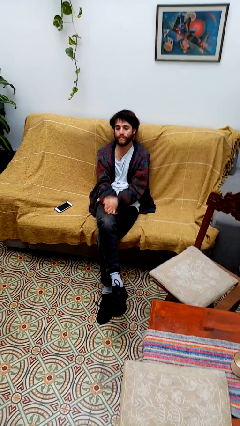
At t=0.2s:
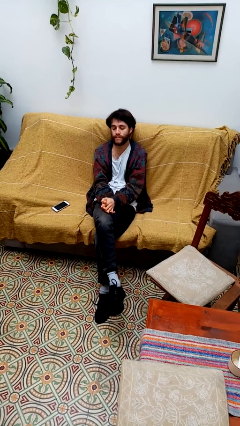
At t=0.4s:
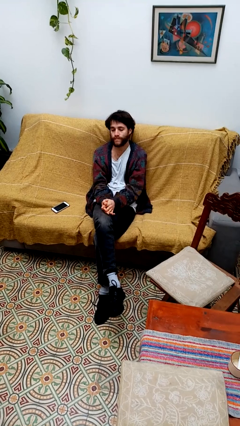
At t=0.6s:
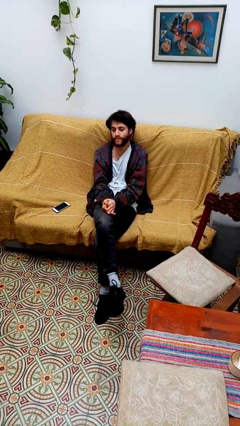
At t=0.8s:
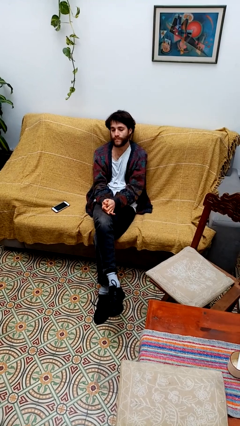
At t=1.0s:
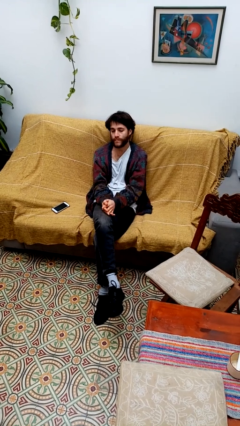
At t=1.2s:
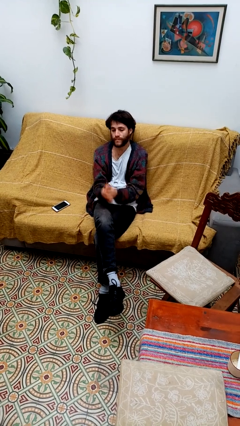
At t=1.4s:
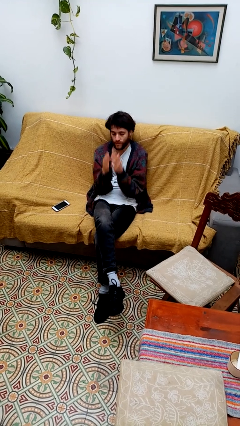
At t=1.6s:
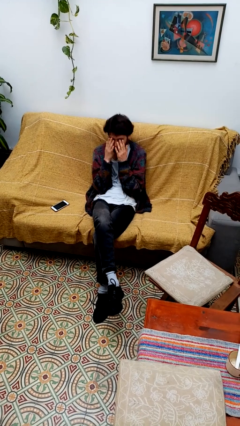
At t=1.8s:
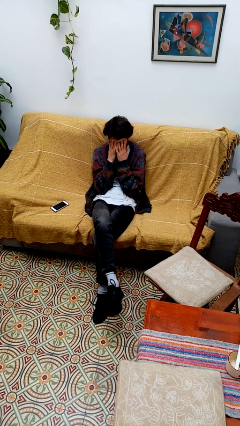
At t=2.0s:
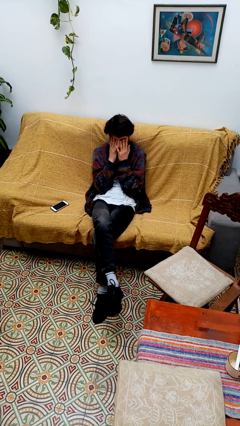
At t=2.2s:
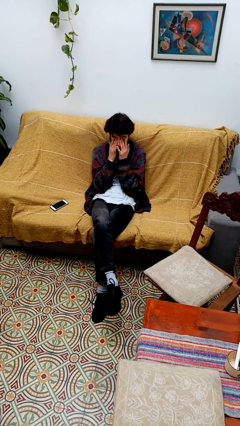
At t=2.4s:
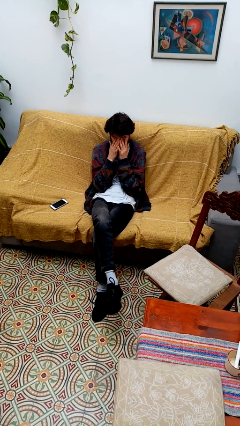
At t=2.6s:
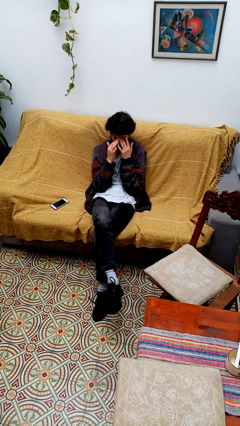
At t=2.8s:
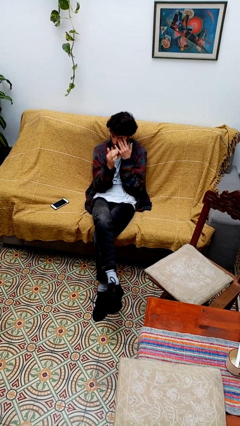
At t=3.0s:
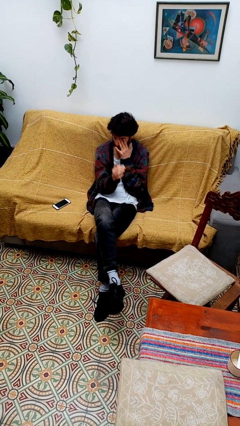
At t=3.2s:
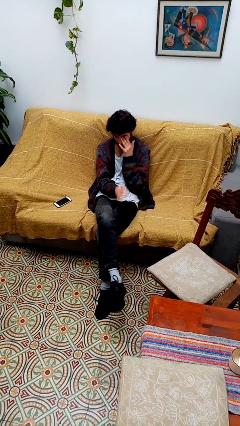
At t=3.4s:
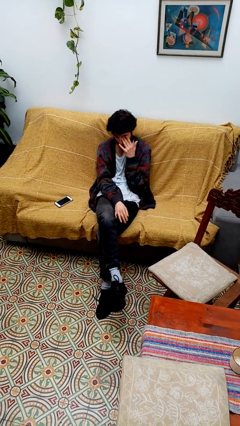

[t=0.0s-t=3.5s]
person rubs eyes

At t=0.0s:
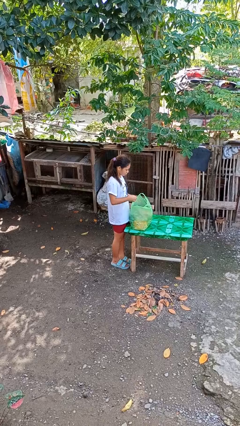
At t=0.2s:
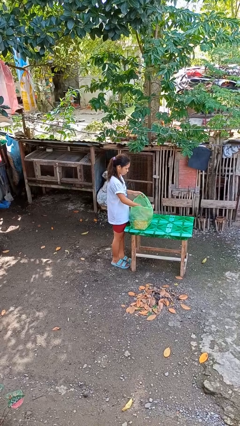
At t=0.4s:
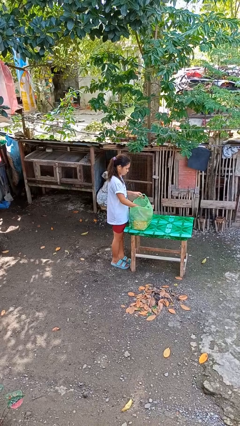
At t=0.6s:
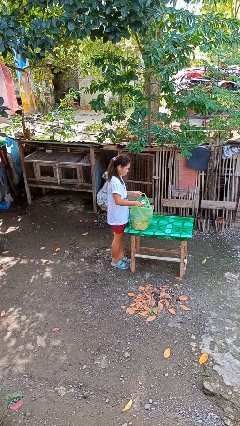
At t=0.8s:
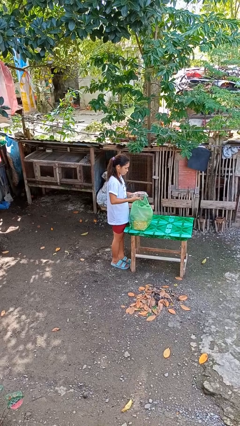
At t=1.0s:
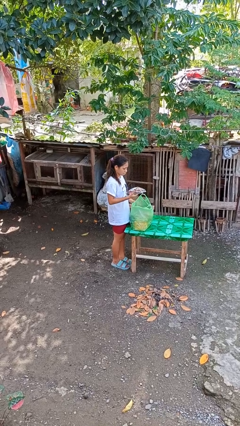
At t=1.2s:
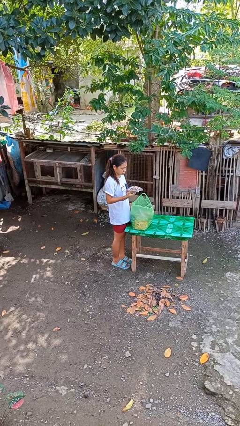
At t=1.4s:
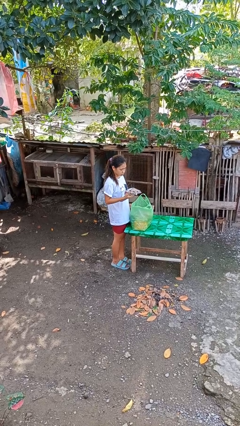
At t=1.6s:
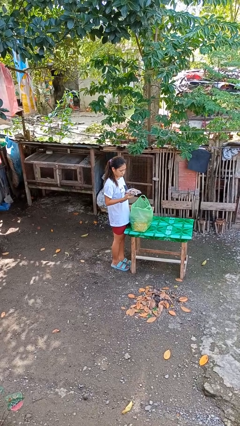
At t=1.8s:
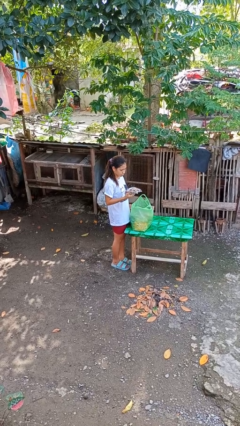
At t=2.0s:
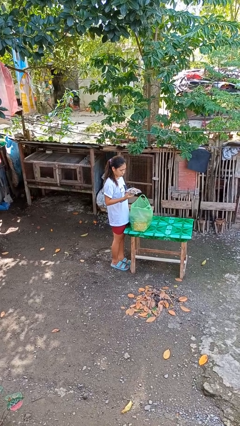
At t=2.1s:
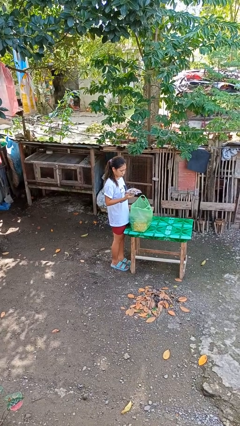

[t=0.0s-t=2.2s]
person takes object from bag

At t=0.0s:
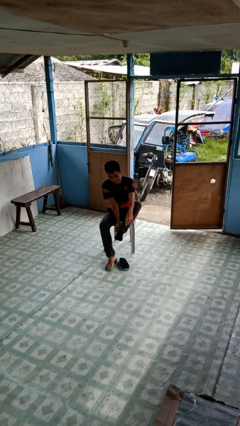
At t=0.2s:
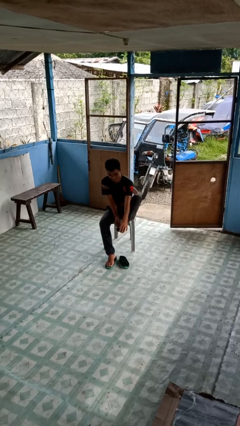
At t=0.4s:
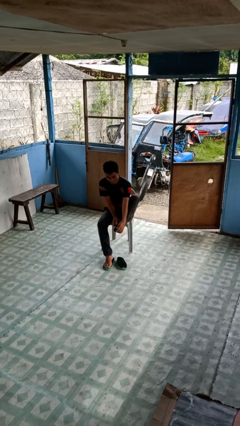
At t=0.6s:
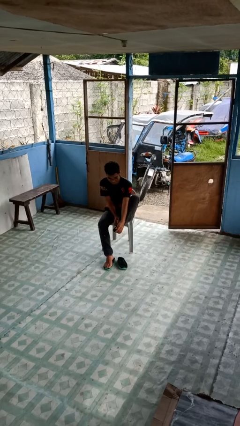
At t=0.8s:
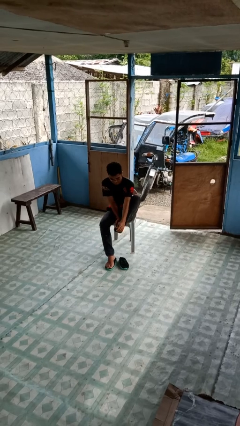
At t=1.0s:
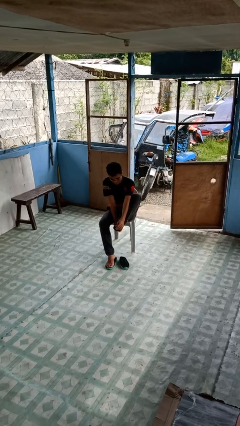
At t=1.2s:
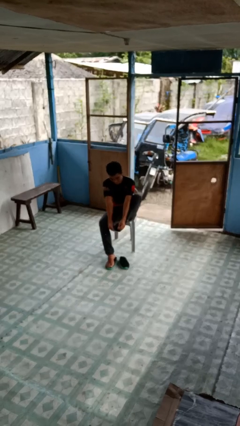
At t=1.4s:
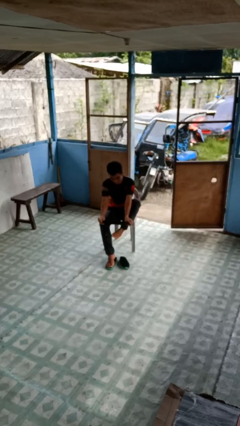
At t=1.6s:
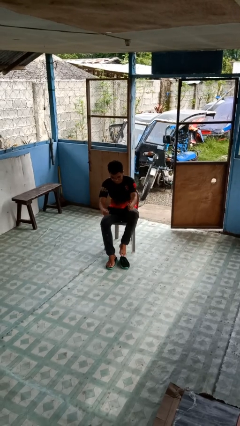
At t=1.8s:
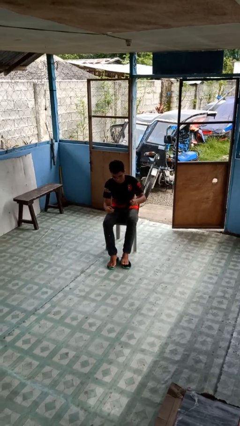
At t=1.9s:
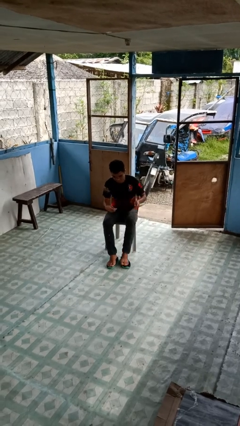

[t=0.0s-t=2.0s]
person takes off socks

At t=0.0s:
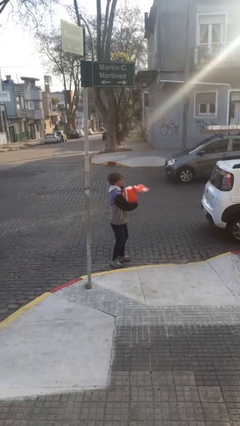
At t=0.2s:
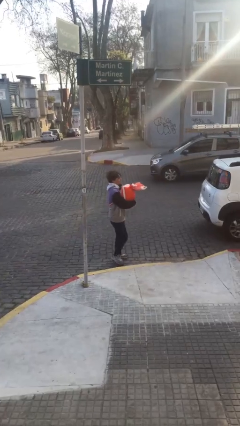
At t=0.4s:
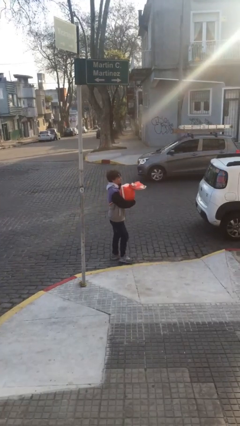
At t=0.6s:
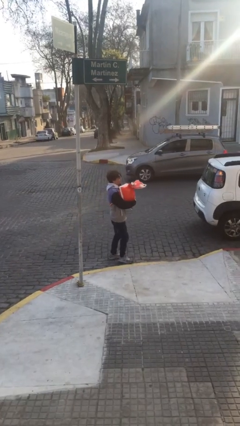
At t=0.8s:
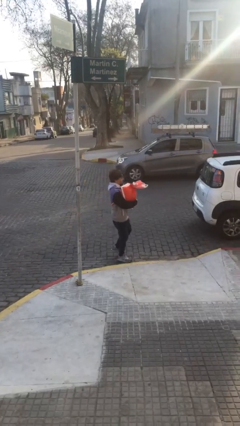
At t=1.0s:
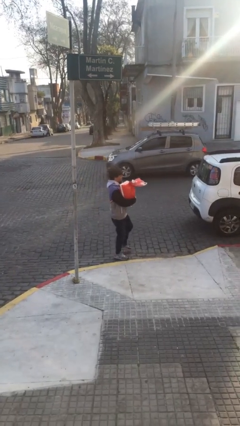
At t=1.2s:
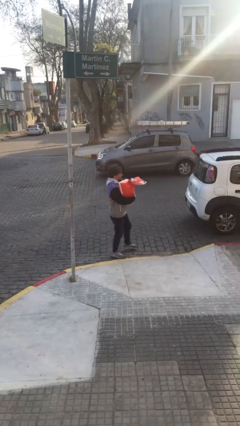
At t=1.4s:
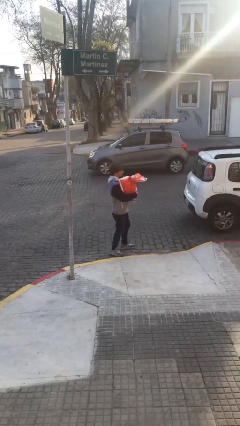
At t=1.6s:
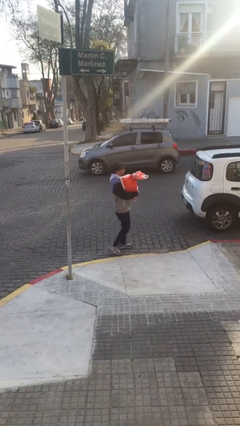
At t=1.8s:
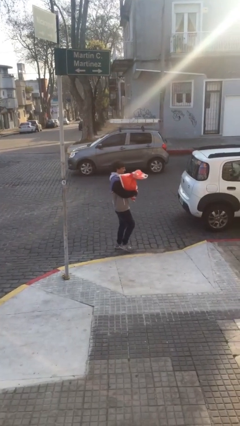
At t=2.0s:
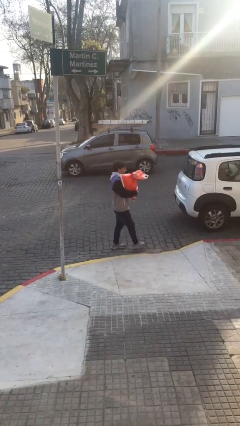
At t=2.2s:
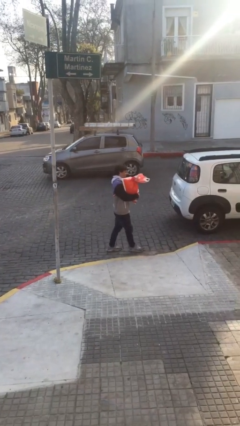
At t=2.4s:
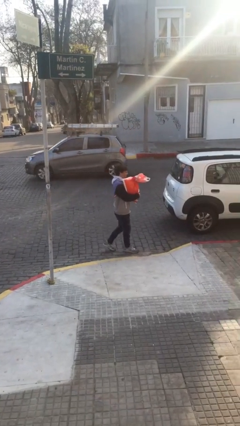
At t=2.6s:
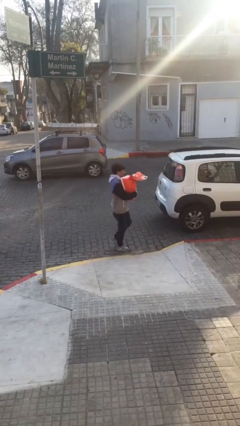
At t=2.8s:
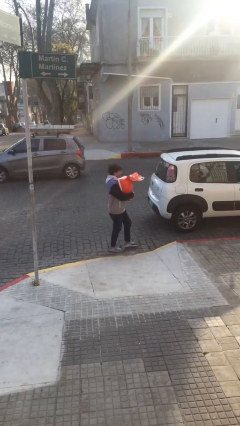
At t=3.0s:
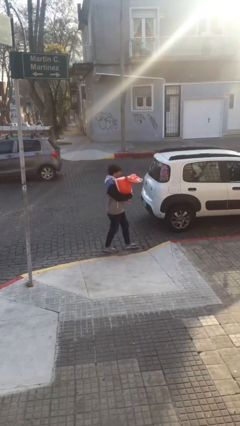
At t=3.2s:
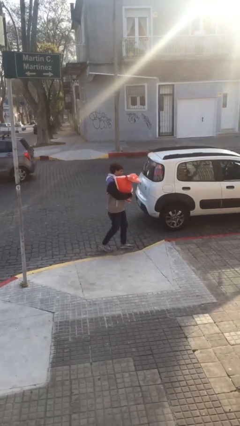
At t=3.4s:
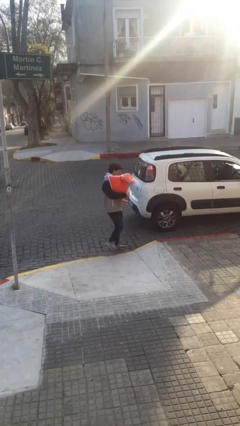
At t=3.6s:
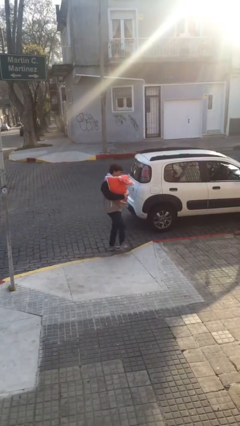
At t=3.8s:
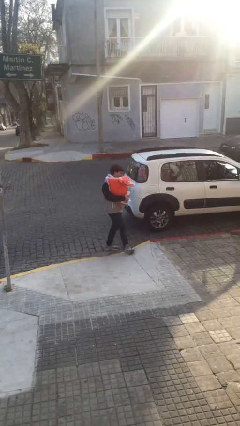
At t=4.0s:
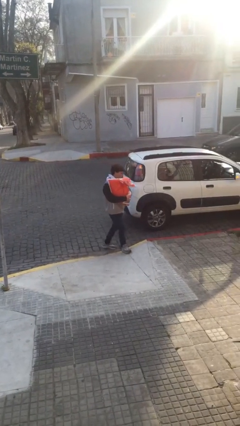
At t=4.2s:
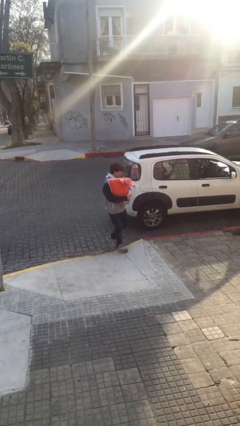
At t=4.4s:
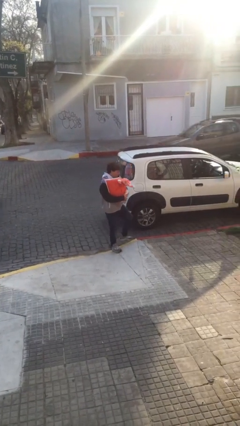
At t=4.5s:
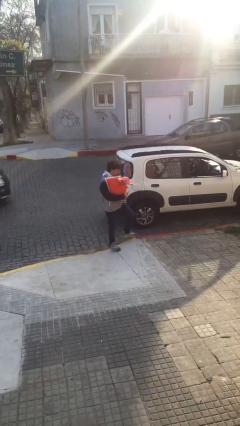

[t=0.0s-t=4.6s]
person carries heavy object

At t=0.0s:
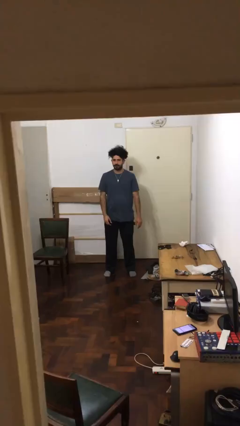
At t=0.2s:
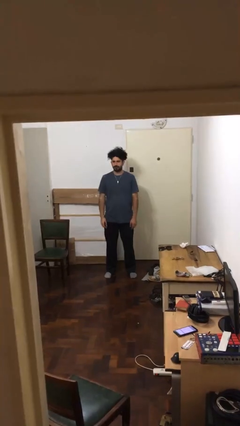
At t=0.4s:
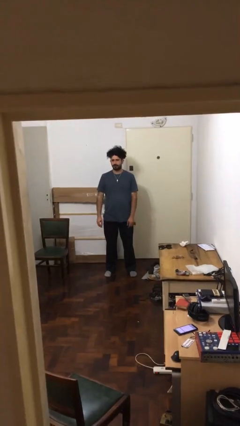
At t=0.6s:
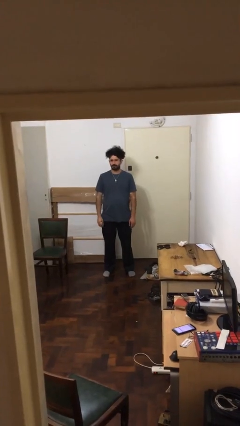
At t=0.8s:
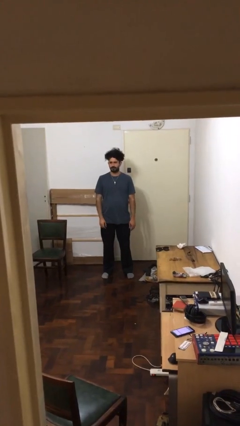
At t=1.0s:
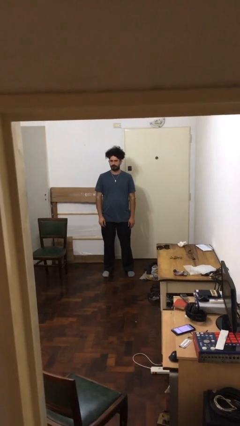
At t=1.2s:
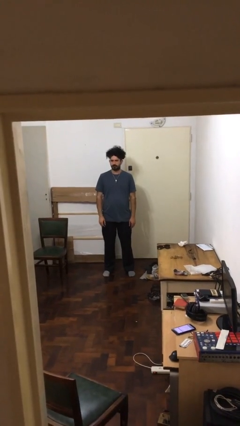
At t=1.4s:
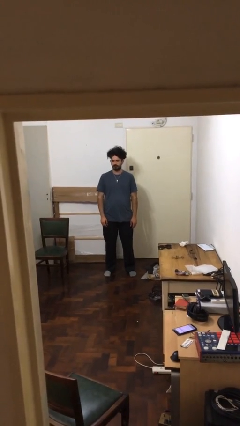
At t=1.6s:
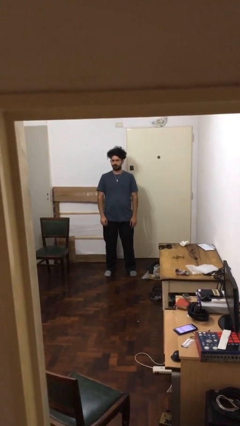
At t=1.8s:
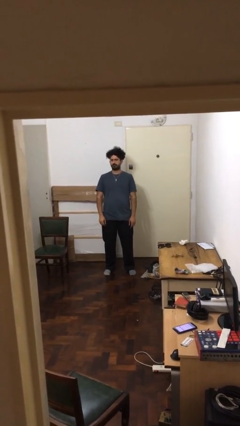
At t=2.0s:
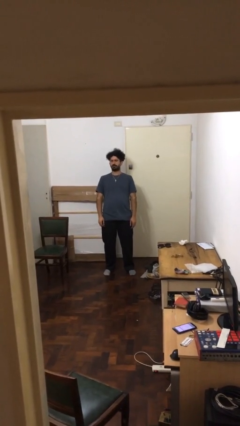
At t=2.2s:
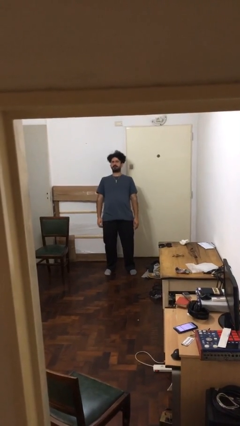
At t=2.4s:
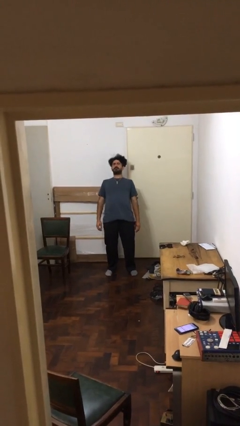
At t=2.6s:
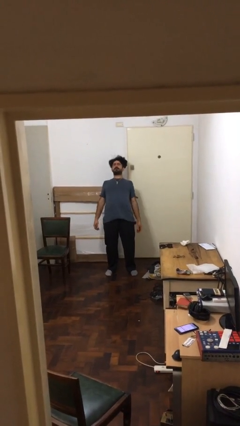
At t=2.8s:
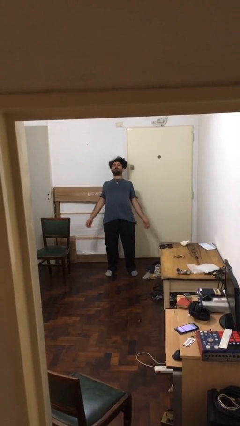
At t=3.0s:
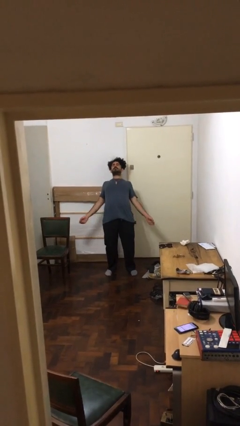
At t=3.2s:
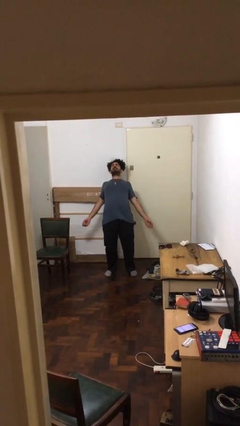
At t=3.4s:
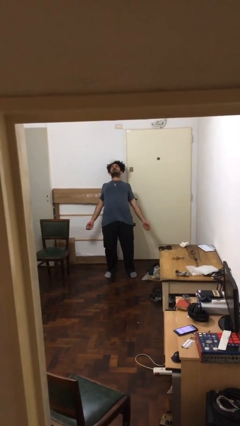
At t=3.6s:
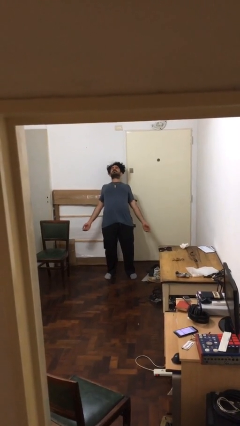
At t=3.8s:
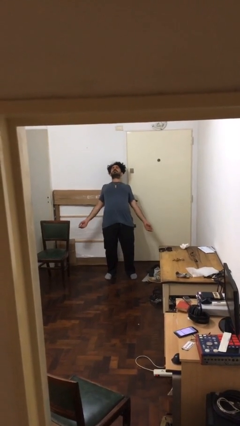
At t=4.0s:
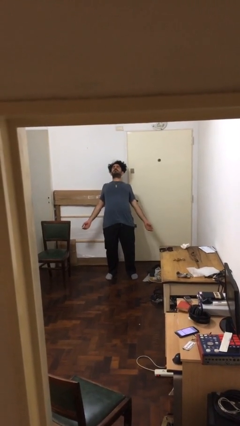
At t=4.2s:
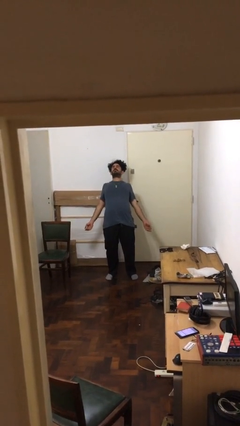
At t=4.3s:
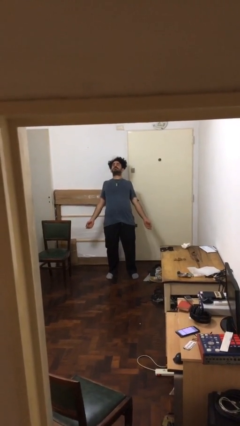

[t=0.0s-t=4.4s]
person stretches back

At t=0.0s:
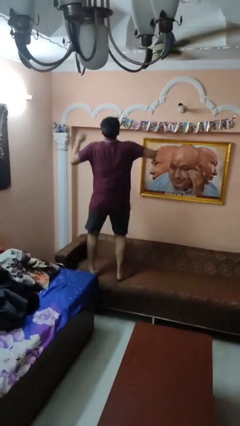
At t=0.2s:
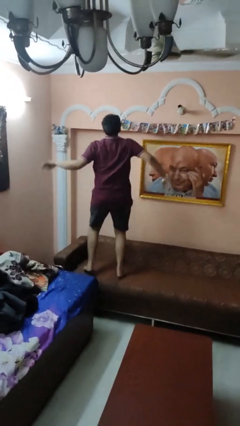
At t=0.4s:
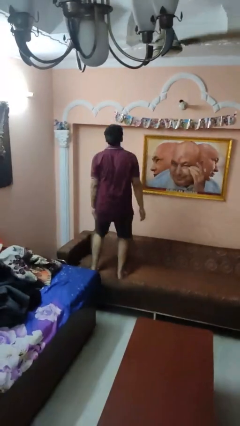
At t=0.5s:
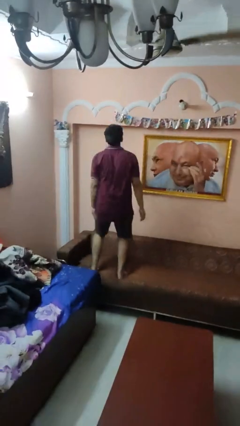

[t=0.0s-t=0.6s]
person jumps on couch

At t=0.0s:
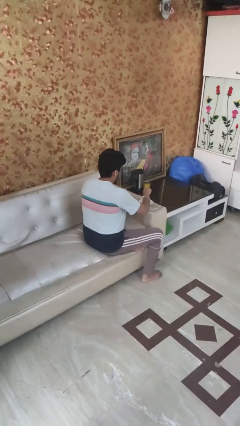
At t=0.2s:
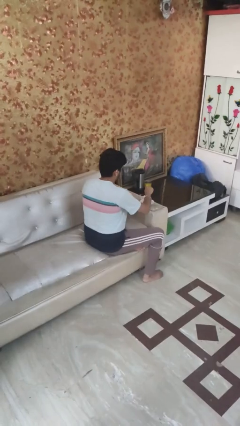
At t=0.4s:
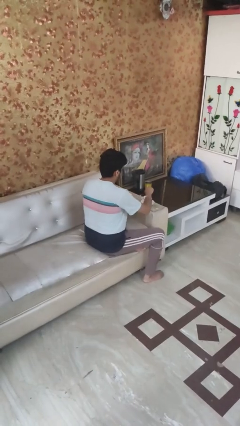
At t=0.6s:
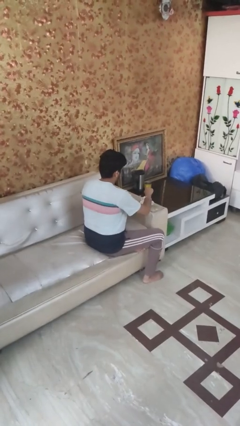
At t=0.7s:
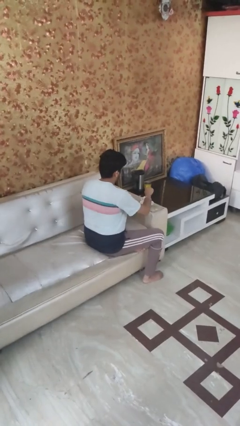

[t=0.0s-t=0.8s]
person stirs mug
